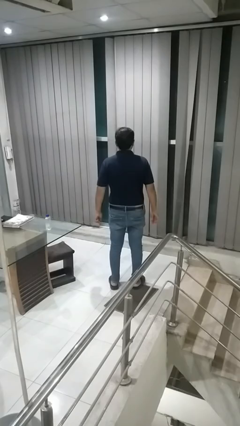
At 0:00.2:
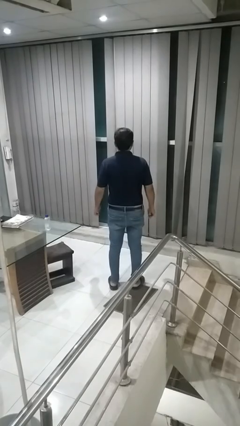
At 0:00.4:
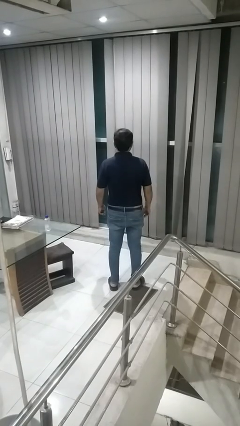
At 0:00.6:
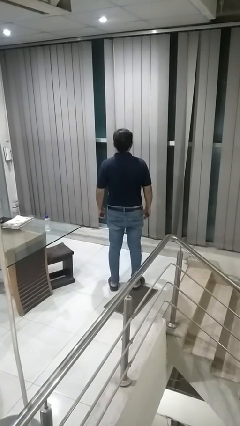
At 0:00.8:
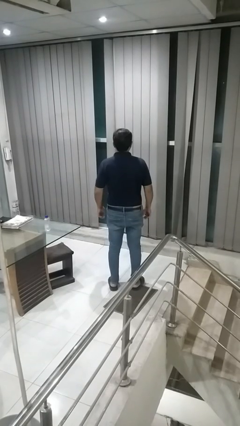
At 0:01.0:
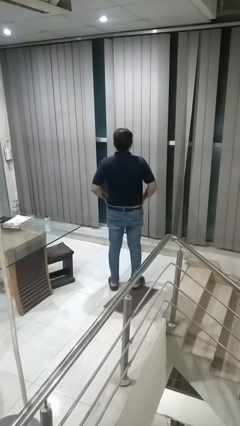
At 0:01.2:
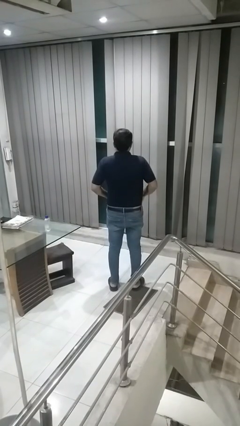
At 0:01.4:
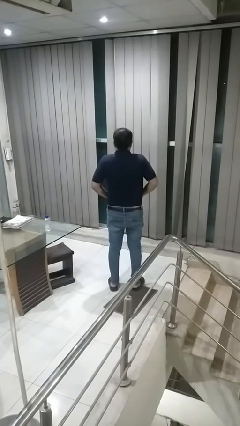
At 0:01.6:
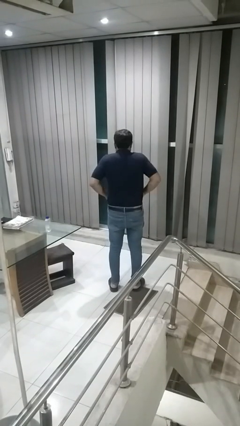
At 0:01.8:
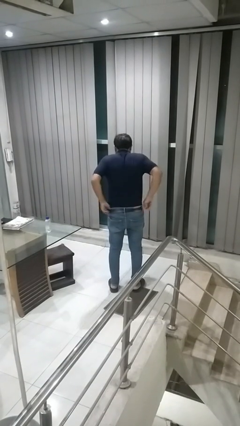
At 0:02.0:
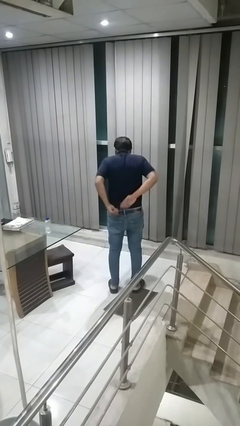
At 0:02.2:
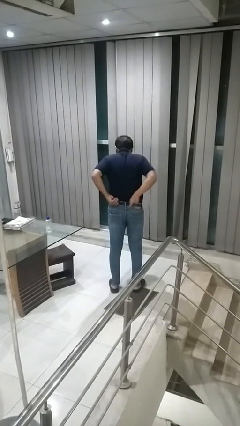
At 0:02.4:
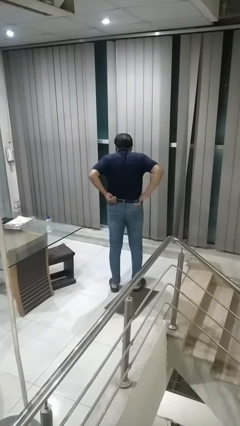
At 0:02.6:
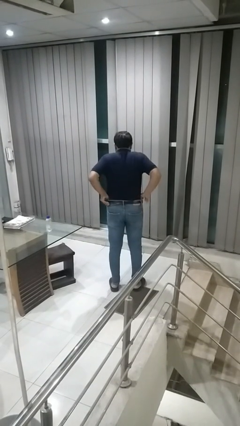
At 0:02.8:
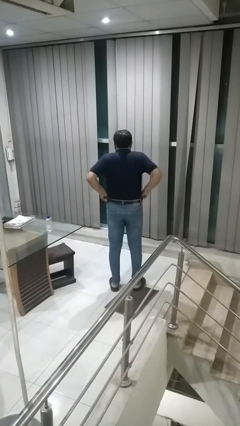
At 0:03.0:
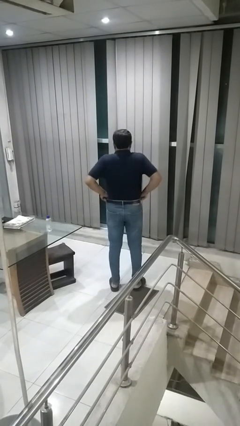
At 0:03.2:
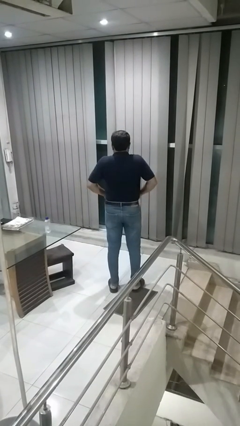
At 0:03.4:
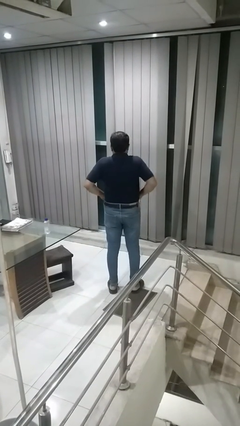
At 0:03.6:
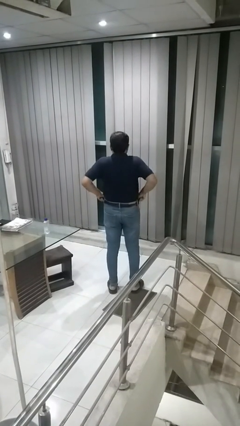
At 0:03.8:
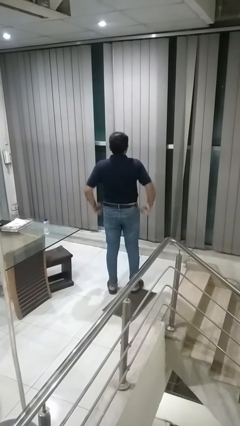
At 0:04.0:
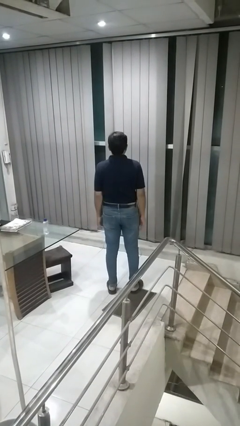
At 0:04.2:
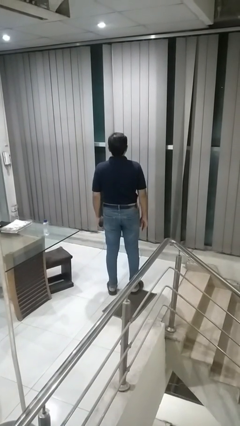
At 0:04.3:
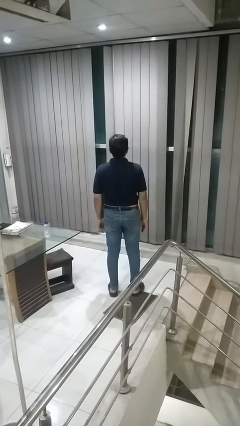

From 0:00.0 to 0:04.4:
person hikes up pants

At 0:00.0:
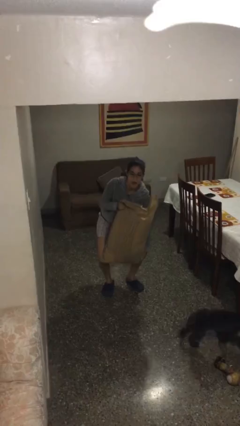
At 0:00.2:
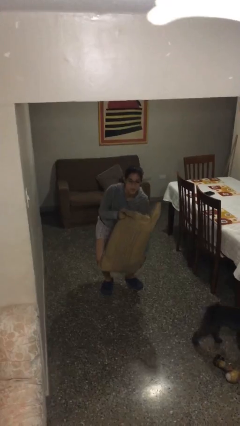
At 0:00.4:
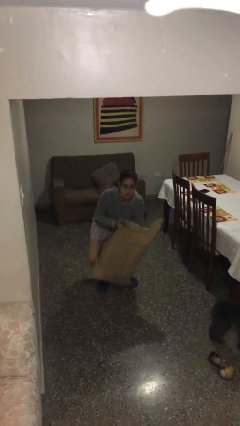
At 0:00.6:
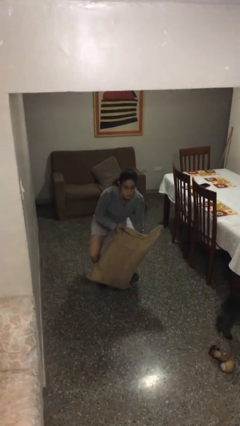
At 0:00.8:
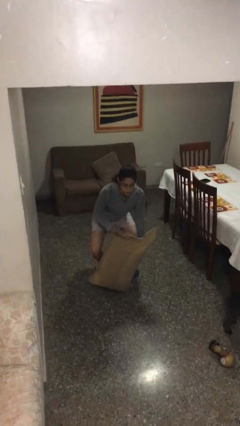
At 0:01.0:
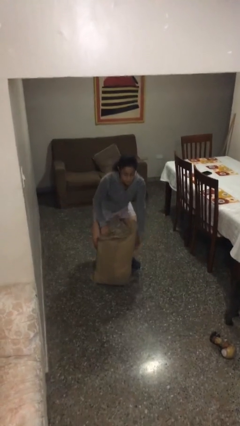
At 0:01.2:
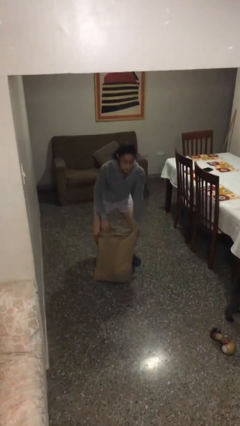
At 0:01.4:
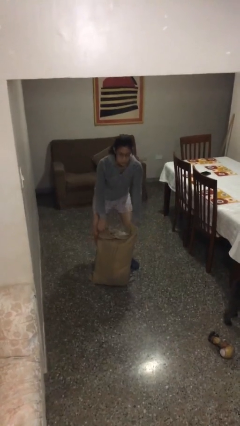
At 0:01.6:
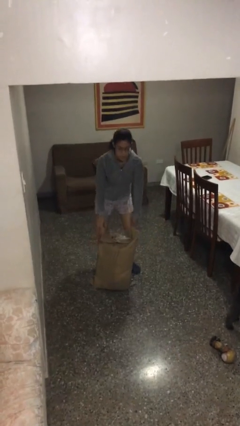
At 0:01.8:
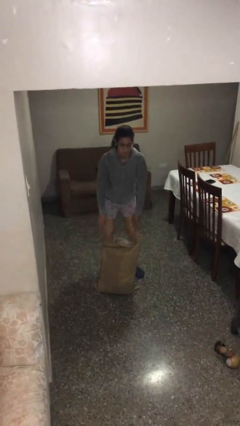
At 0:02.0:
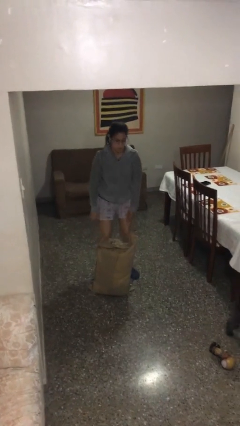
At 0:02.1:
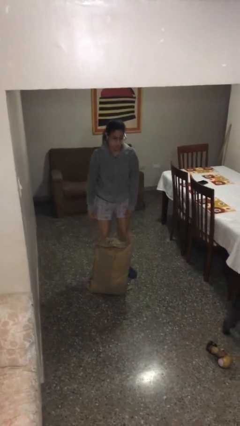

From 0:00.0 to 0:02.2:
person puts down object on floor

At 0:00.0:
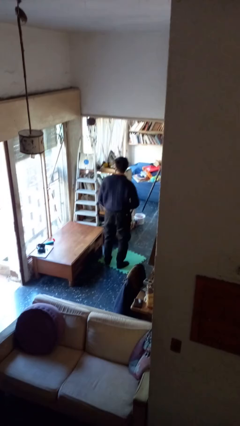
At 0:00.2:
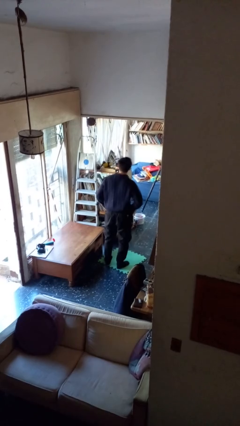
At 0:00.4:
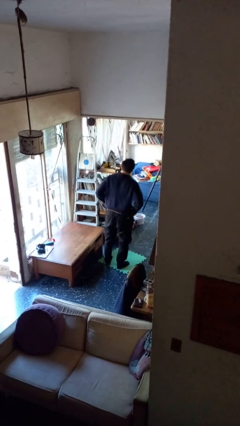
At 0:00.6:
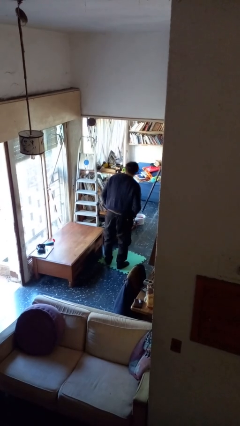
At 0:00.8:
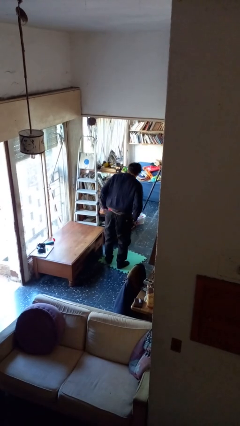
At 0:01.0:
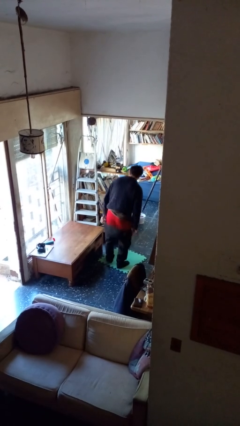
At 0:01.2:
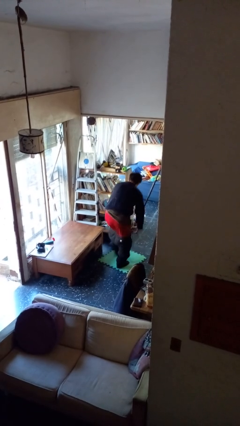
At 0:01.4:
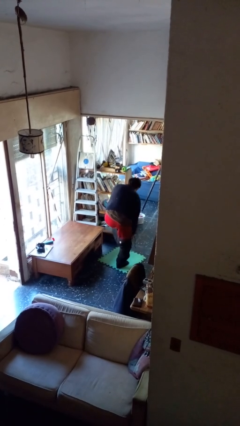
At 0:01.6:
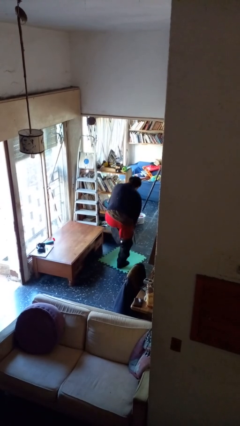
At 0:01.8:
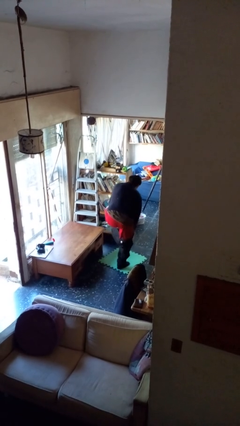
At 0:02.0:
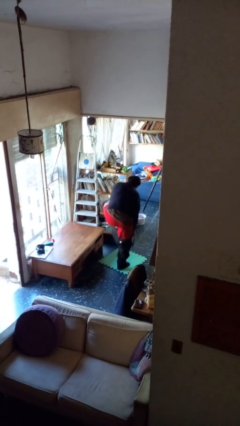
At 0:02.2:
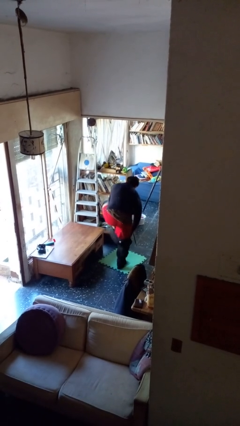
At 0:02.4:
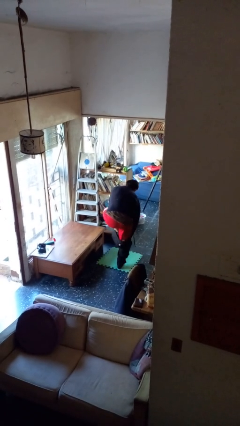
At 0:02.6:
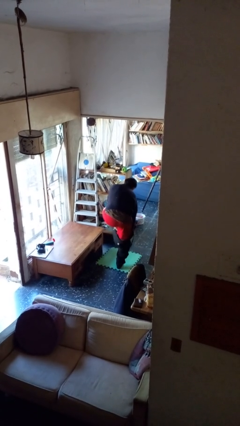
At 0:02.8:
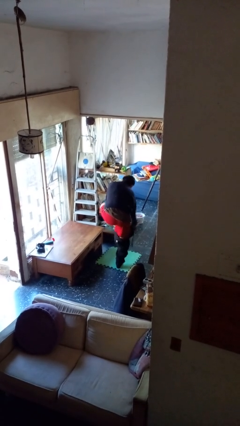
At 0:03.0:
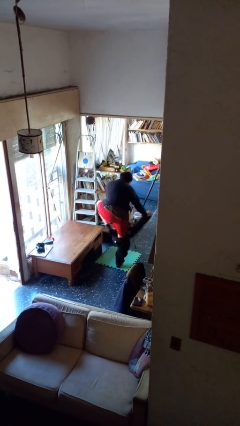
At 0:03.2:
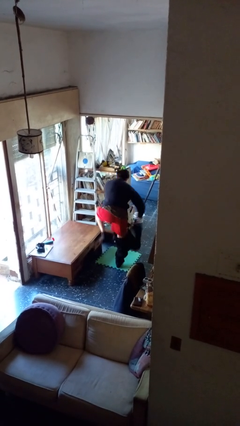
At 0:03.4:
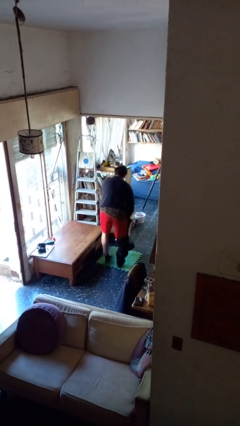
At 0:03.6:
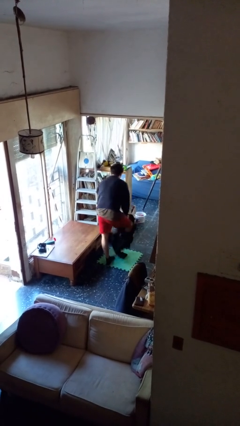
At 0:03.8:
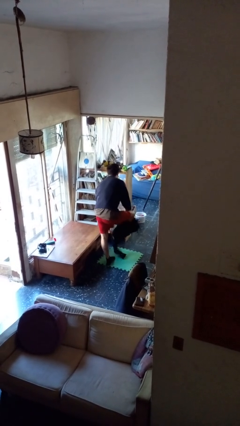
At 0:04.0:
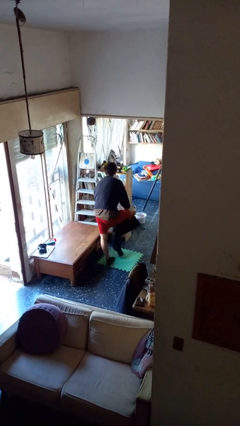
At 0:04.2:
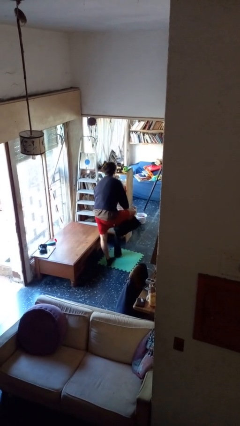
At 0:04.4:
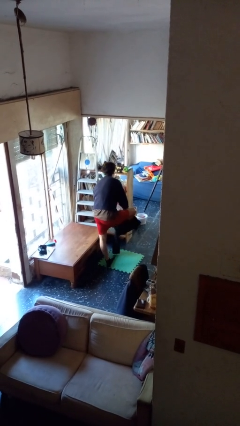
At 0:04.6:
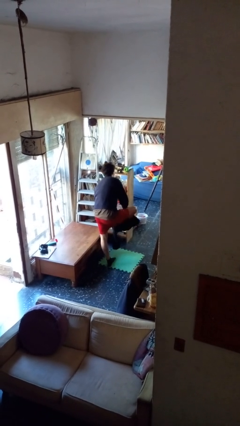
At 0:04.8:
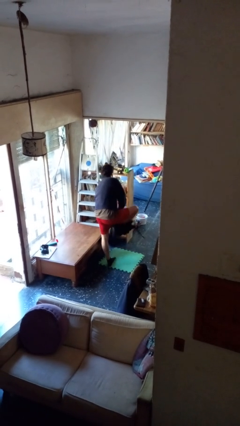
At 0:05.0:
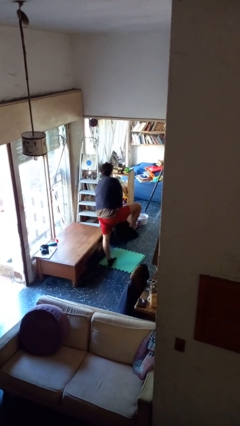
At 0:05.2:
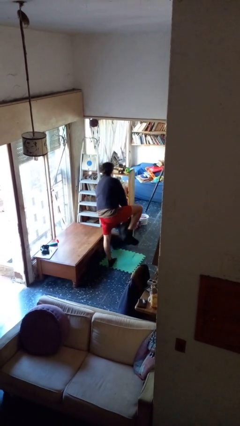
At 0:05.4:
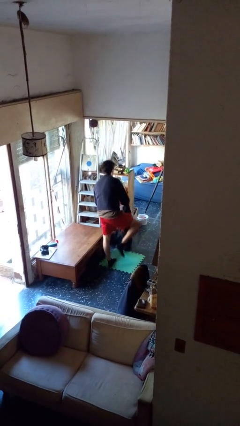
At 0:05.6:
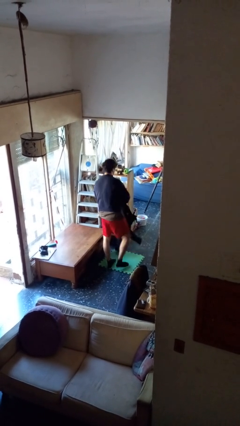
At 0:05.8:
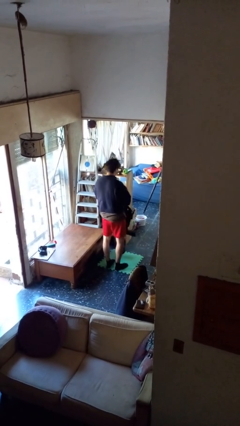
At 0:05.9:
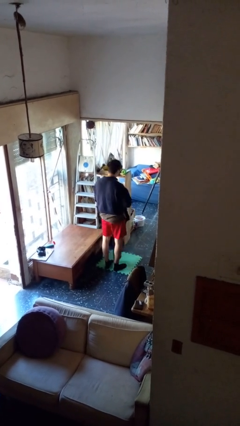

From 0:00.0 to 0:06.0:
person takes off pants

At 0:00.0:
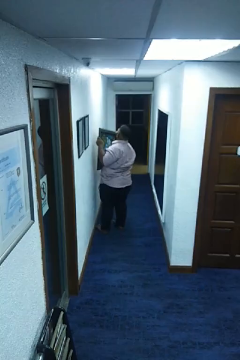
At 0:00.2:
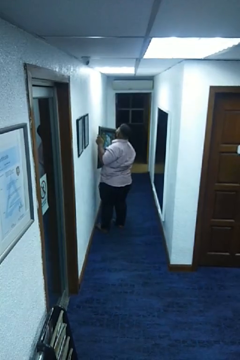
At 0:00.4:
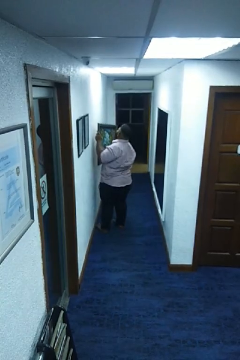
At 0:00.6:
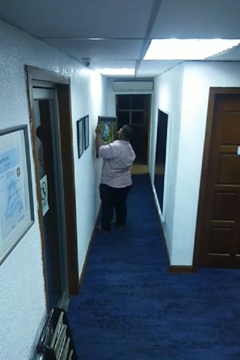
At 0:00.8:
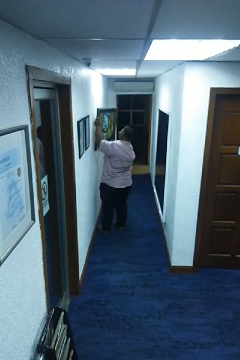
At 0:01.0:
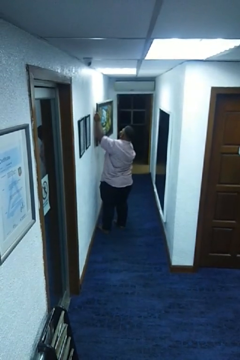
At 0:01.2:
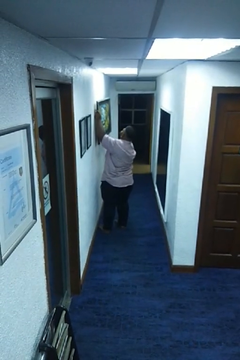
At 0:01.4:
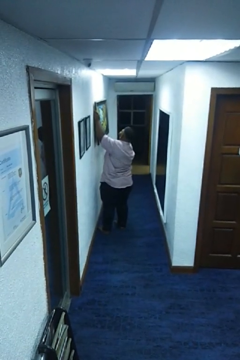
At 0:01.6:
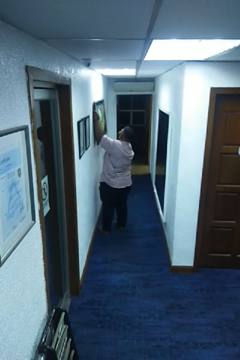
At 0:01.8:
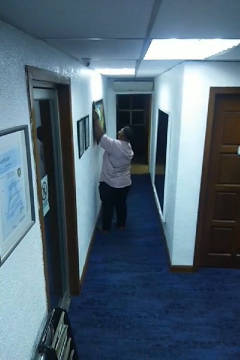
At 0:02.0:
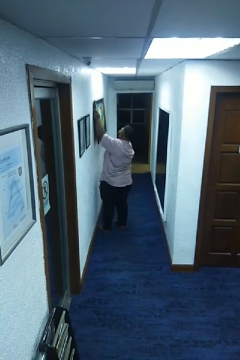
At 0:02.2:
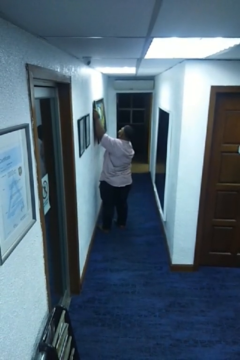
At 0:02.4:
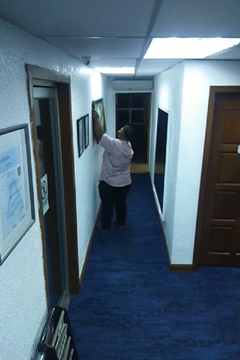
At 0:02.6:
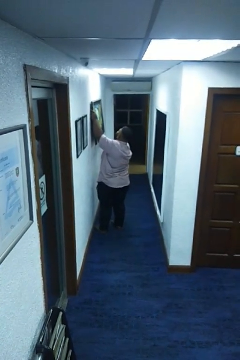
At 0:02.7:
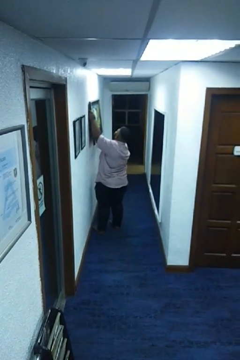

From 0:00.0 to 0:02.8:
person puts up picture frame

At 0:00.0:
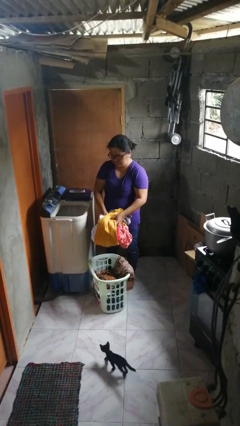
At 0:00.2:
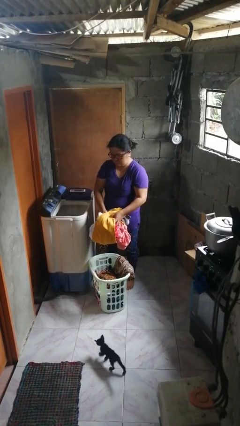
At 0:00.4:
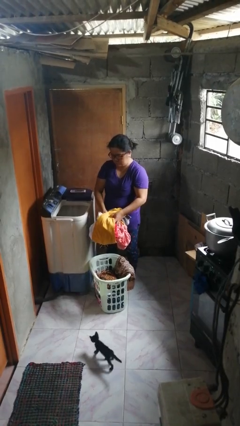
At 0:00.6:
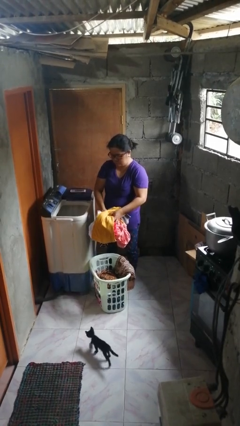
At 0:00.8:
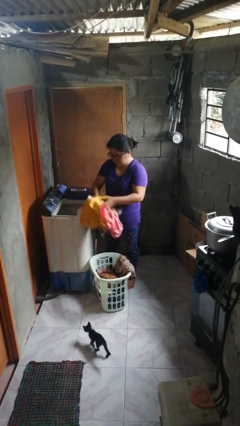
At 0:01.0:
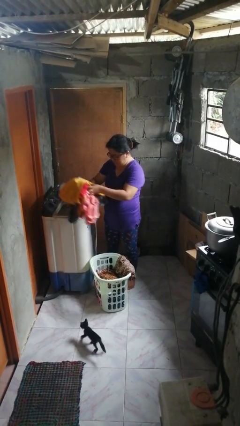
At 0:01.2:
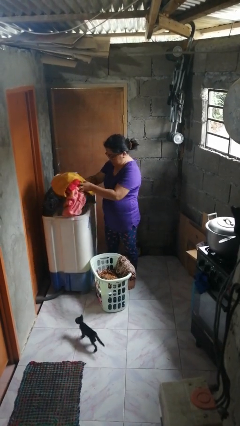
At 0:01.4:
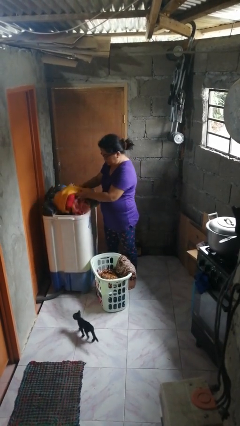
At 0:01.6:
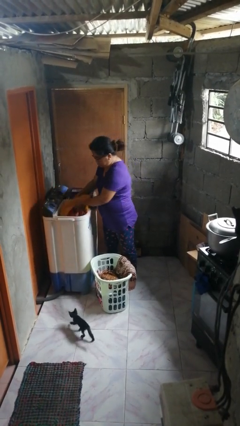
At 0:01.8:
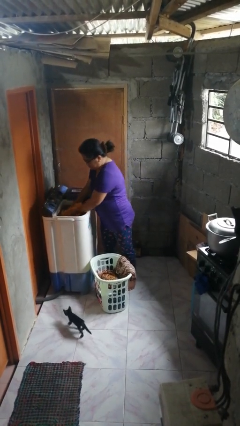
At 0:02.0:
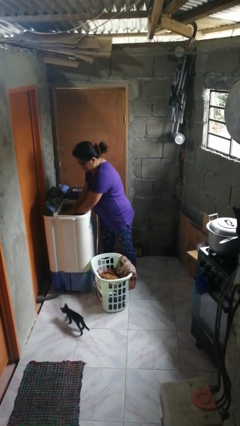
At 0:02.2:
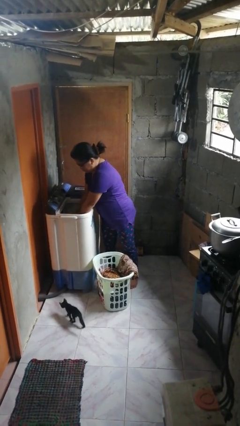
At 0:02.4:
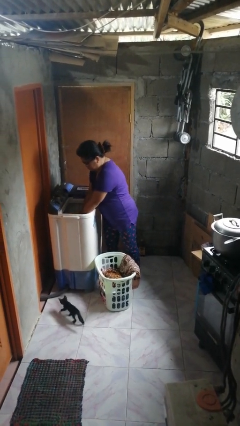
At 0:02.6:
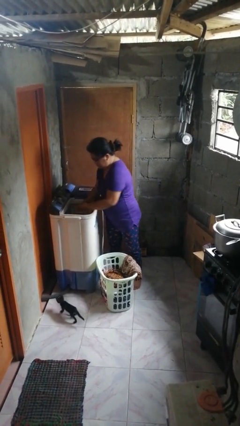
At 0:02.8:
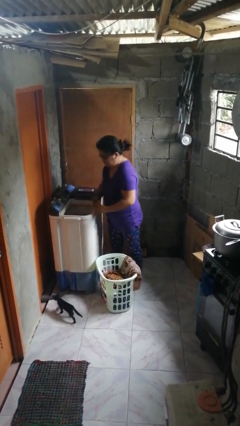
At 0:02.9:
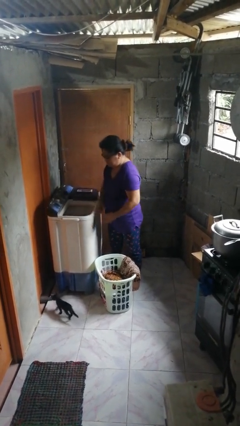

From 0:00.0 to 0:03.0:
person loads clotheswasher
